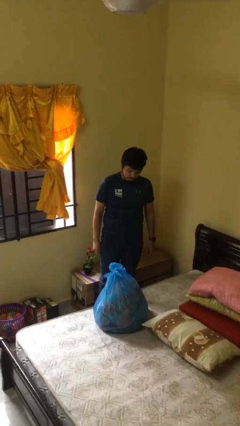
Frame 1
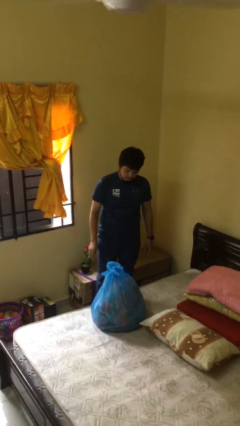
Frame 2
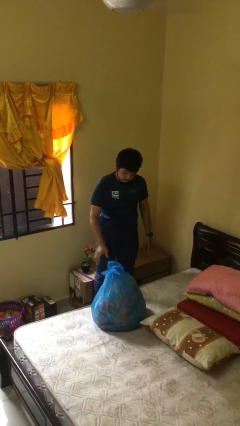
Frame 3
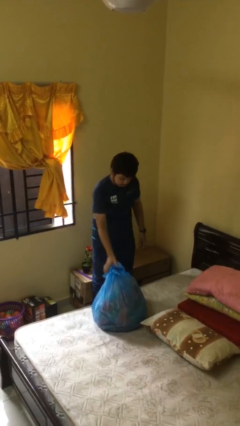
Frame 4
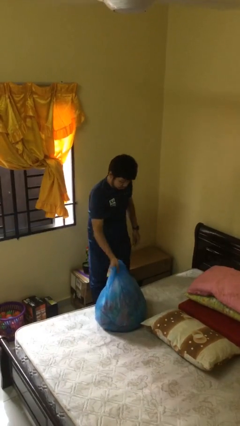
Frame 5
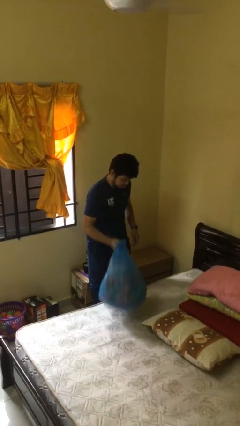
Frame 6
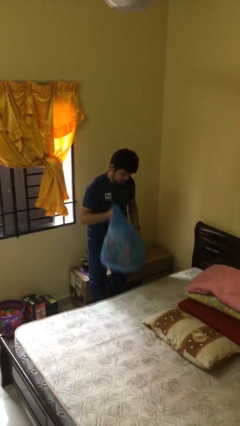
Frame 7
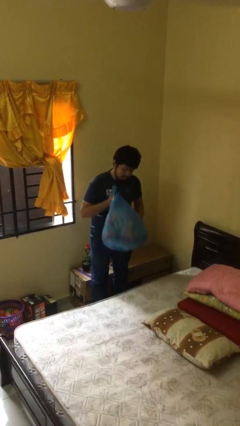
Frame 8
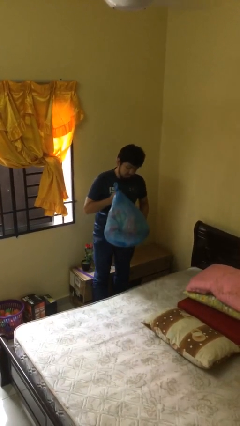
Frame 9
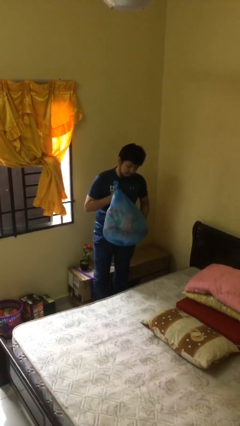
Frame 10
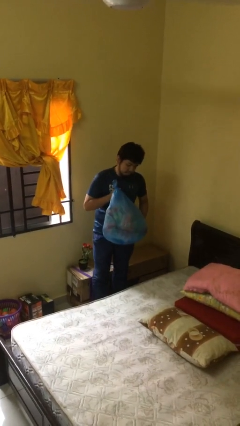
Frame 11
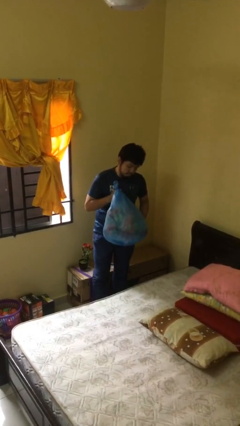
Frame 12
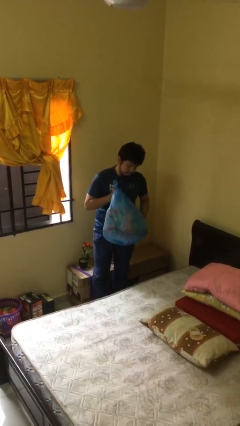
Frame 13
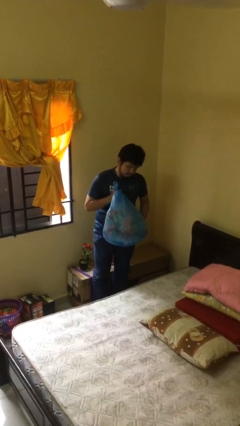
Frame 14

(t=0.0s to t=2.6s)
person picks up object from bed

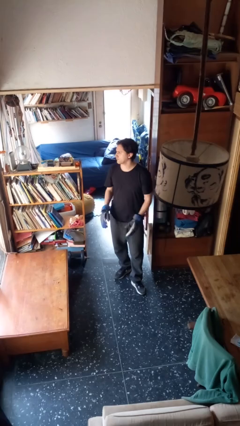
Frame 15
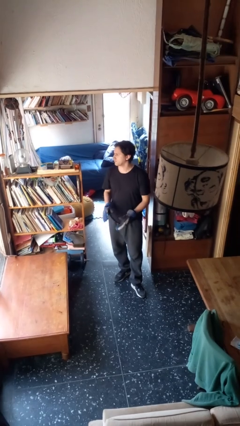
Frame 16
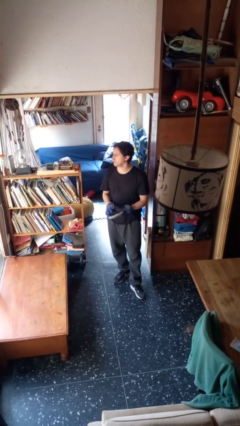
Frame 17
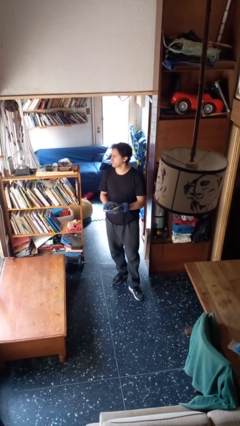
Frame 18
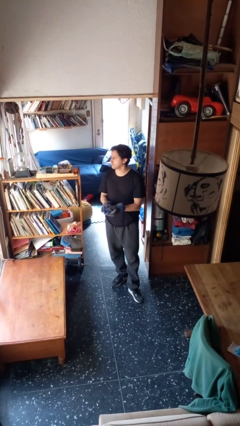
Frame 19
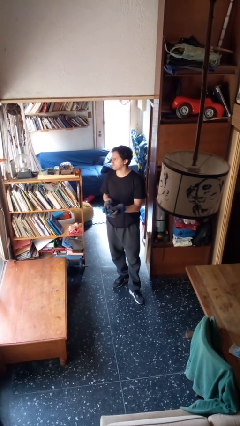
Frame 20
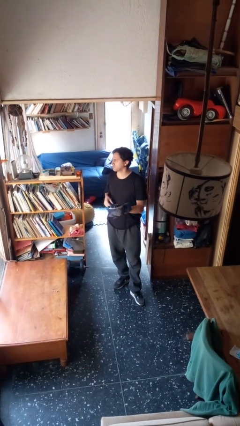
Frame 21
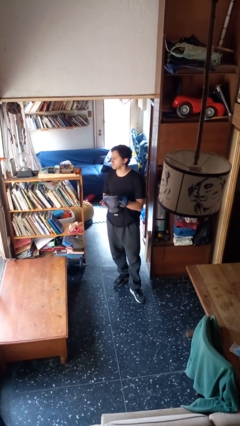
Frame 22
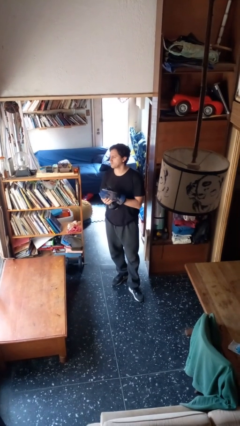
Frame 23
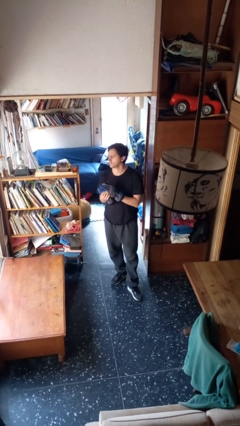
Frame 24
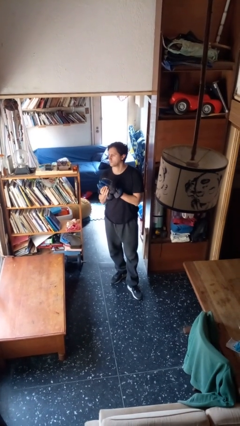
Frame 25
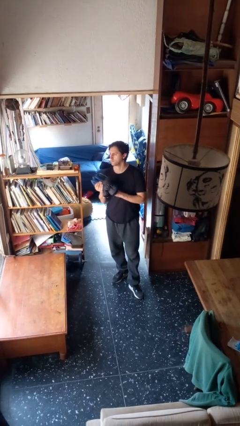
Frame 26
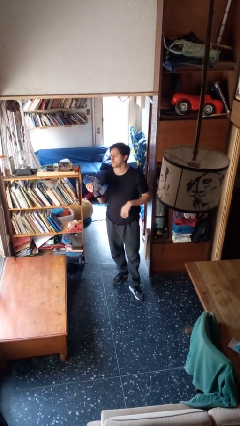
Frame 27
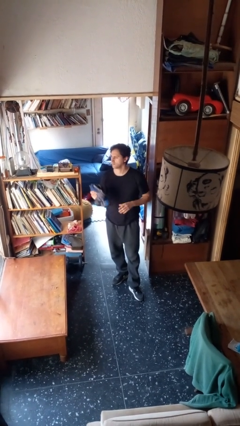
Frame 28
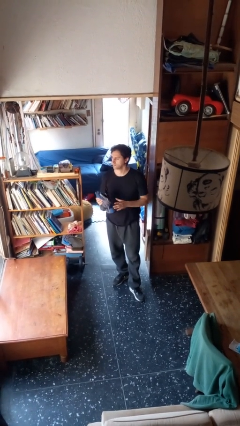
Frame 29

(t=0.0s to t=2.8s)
person takes off gloves

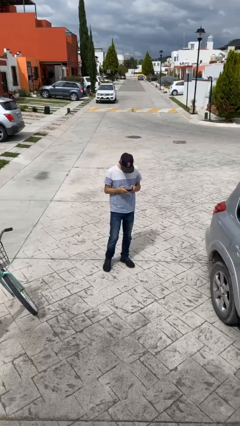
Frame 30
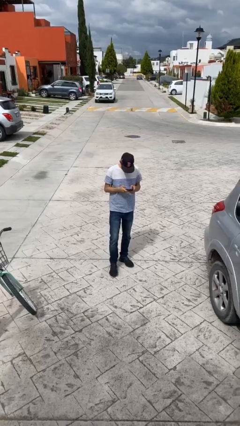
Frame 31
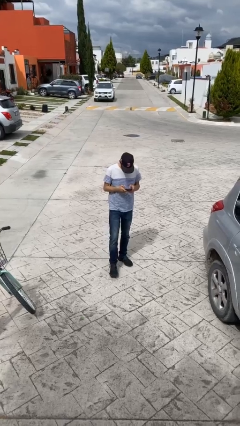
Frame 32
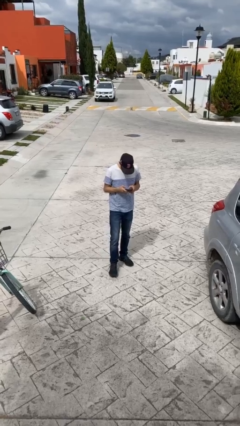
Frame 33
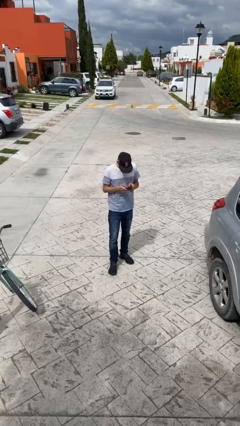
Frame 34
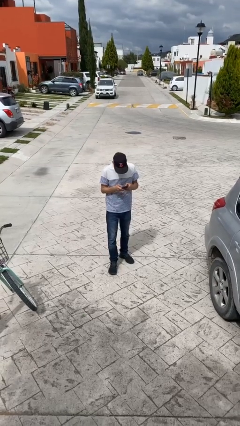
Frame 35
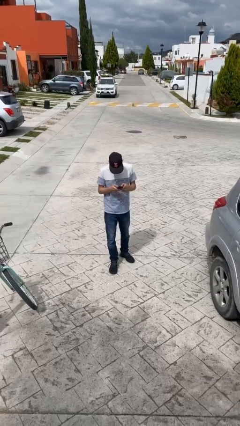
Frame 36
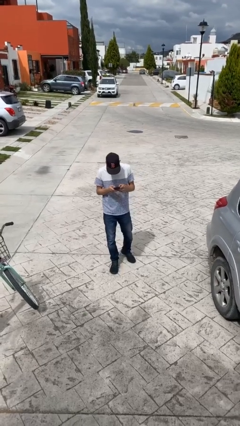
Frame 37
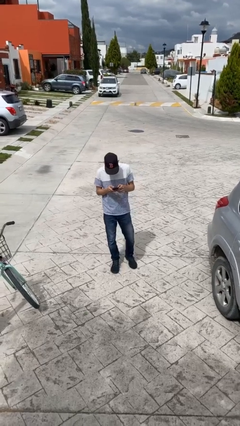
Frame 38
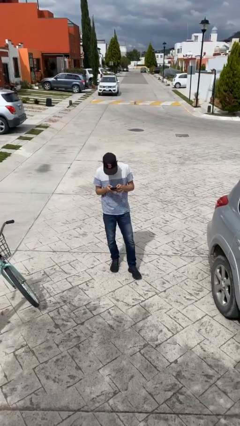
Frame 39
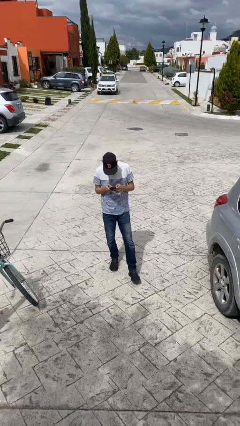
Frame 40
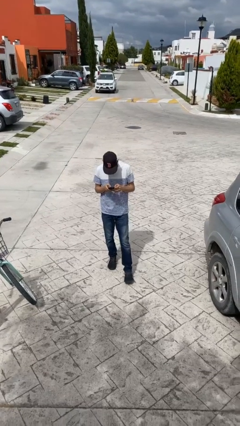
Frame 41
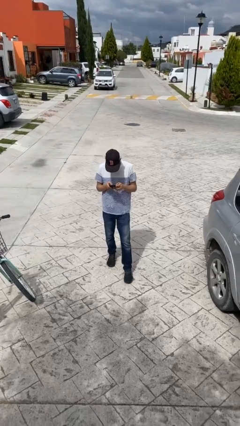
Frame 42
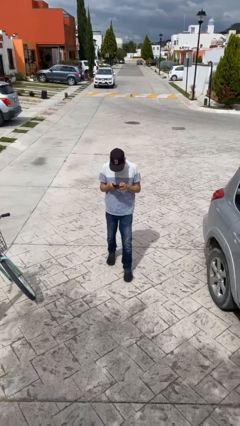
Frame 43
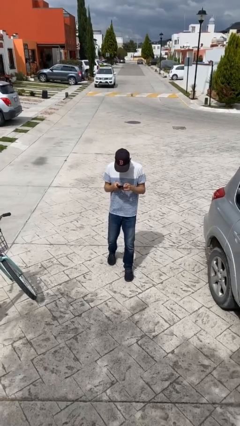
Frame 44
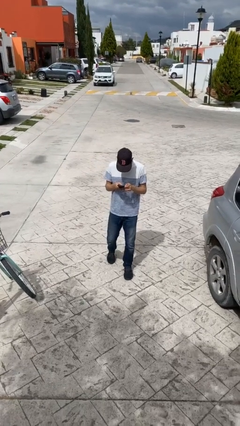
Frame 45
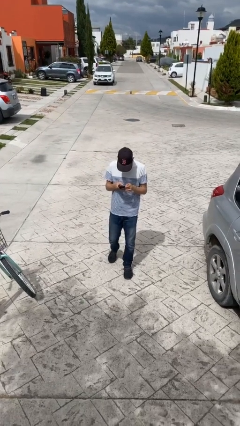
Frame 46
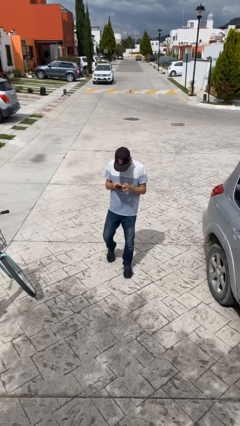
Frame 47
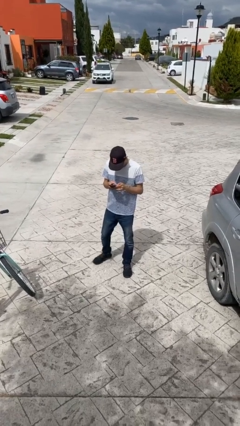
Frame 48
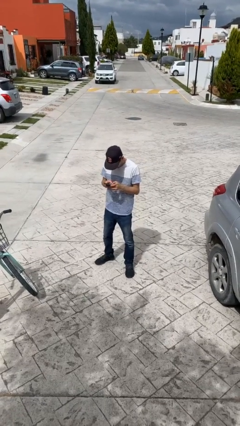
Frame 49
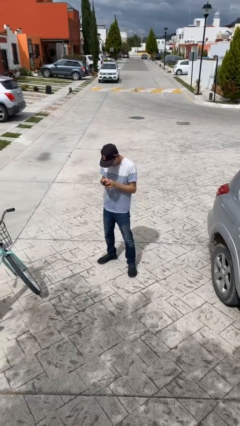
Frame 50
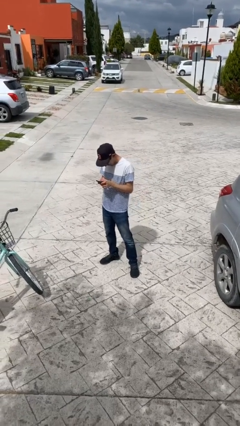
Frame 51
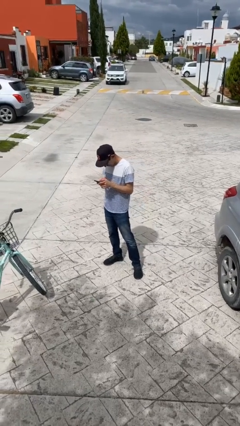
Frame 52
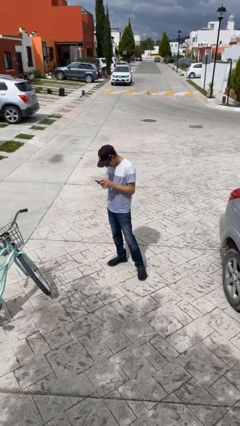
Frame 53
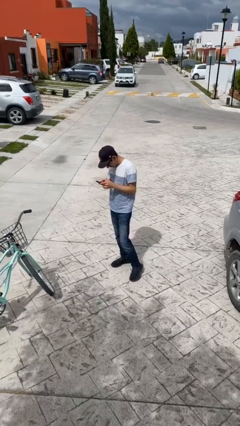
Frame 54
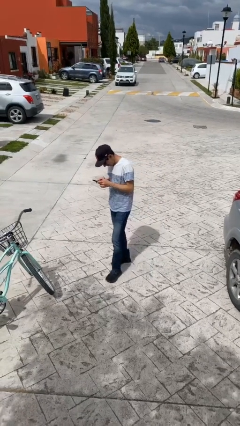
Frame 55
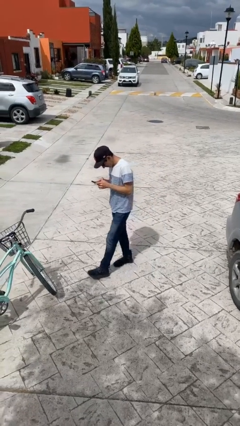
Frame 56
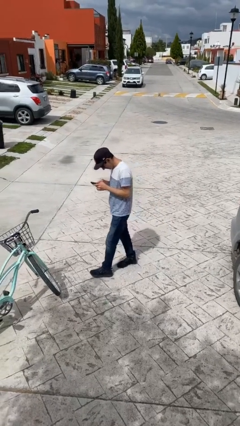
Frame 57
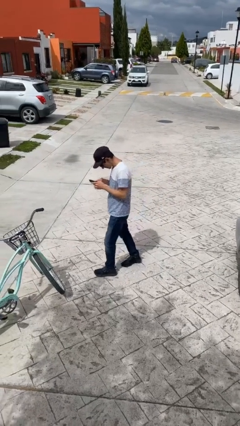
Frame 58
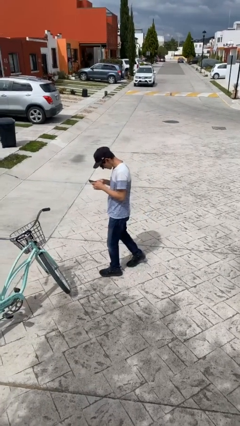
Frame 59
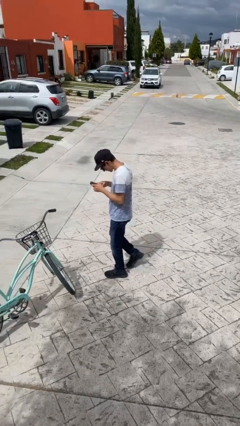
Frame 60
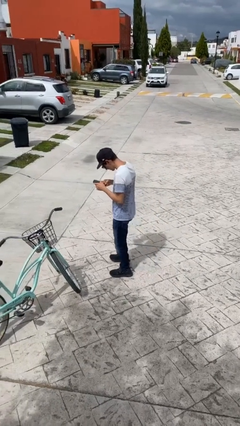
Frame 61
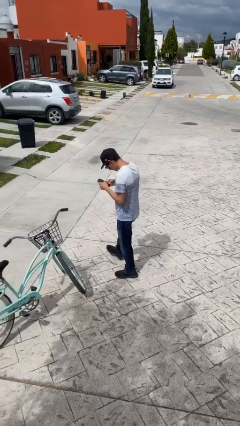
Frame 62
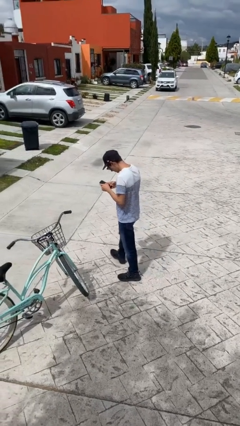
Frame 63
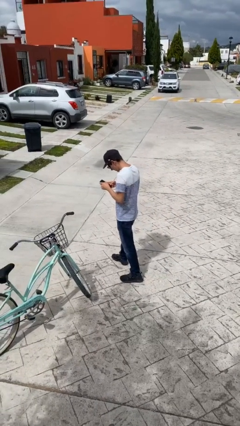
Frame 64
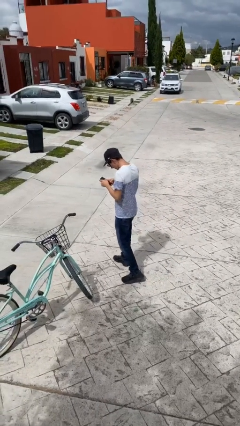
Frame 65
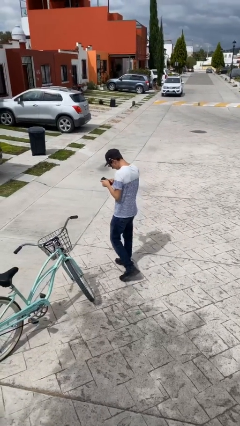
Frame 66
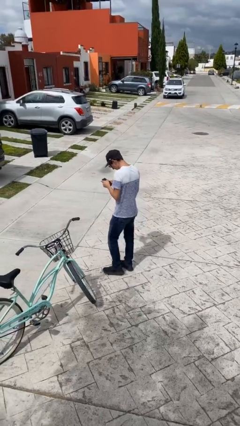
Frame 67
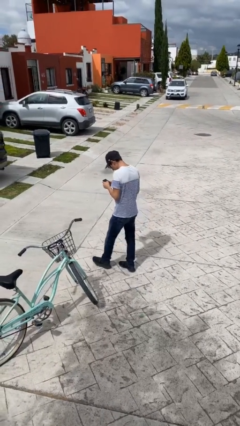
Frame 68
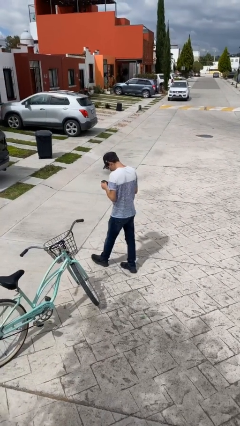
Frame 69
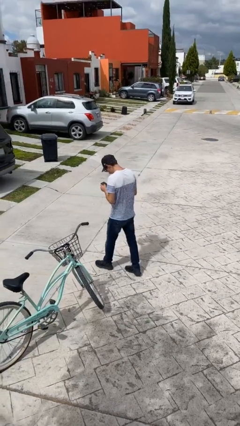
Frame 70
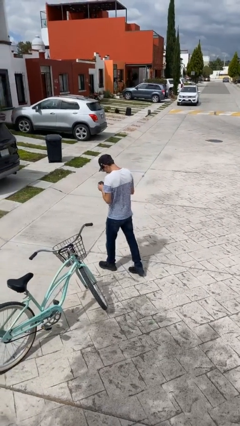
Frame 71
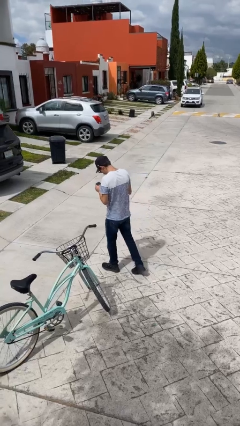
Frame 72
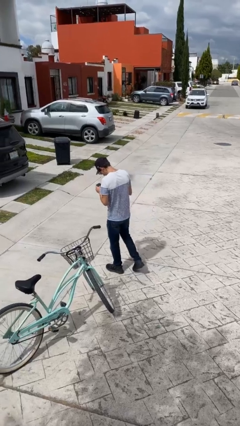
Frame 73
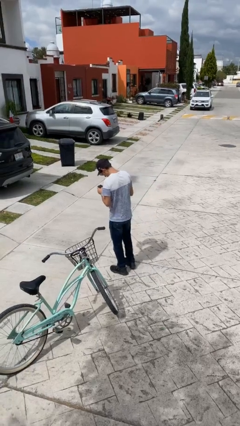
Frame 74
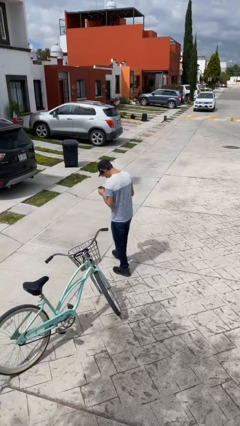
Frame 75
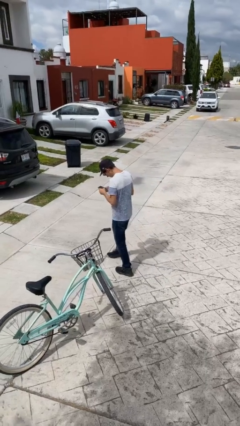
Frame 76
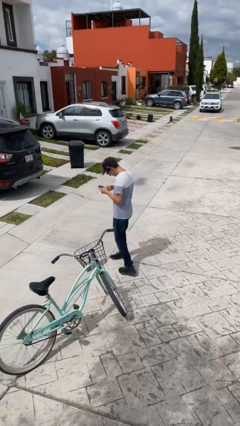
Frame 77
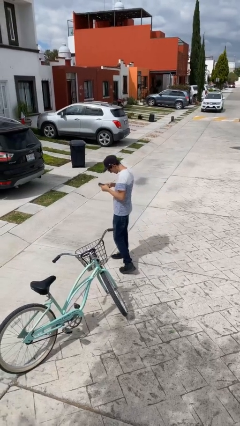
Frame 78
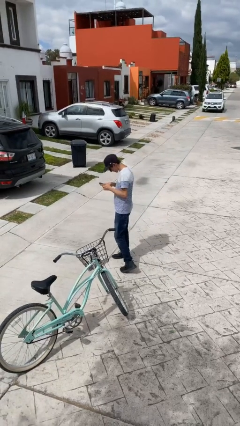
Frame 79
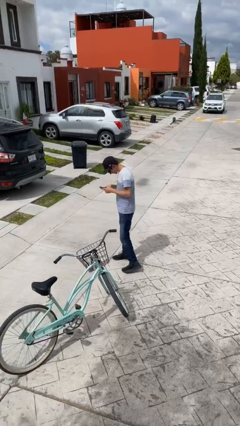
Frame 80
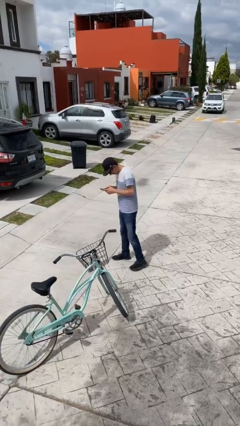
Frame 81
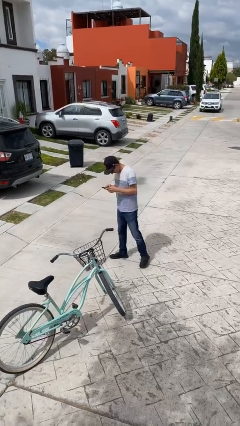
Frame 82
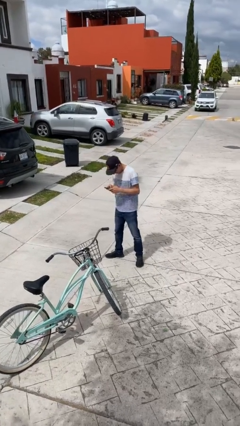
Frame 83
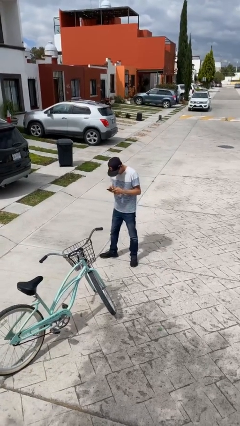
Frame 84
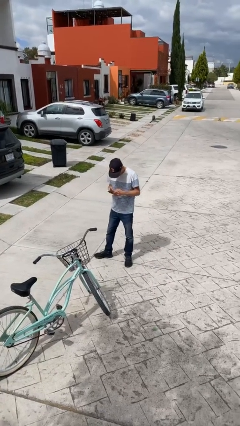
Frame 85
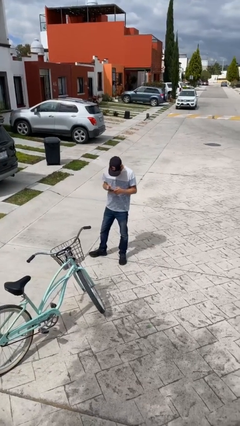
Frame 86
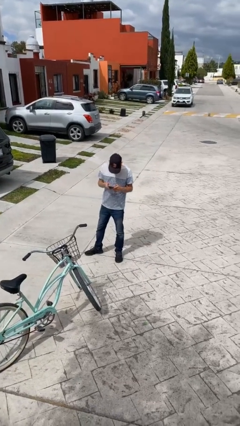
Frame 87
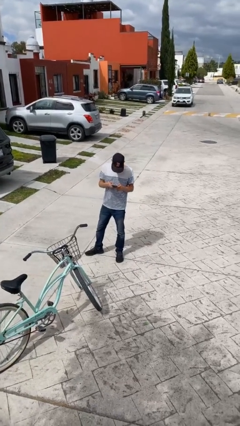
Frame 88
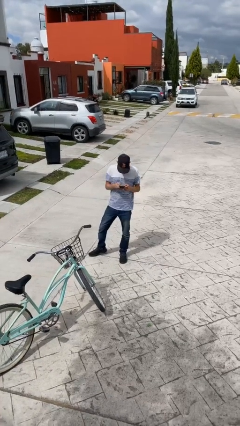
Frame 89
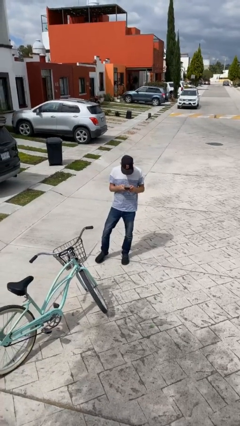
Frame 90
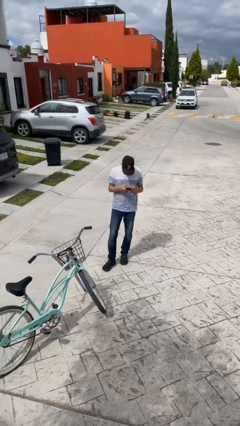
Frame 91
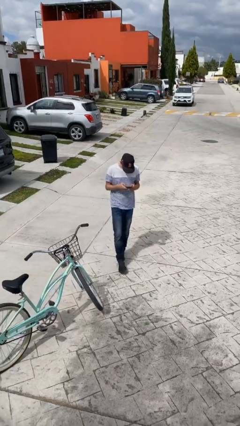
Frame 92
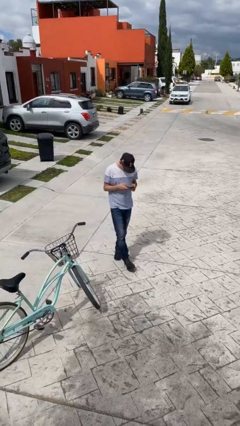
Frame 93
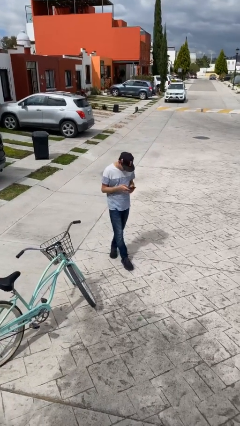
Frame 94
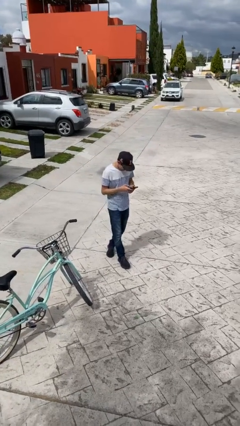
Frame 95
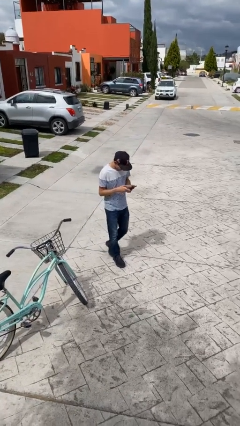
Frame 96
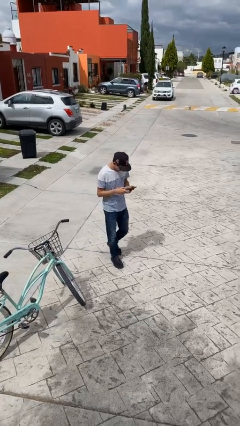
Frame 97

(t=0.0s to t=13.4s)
person texts on phone
